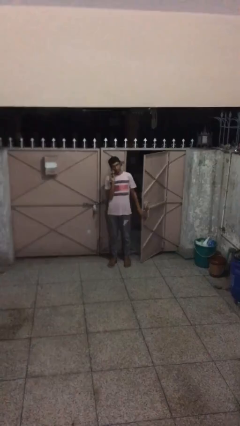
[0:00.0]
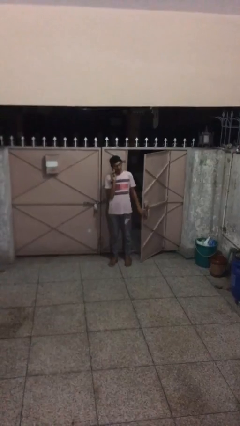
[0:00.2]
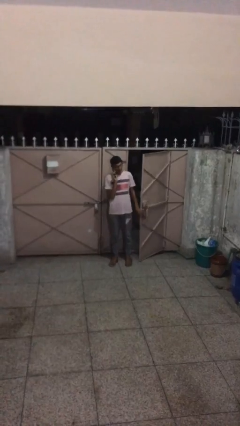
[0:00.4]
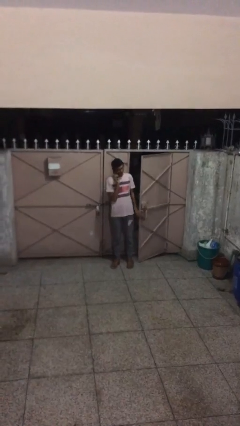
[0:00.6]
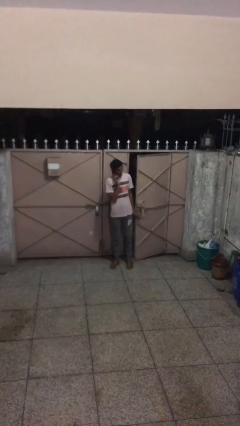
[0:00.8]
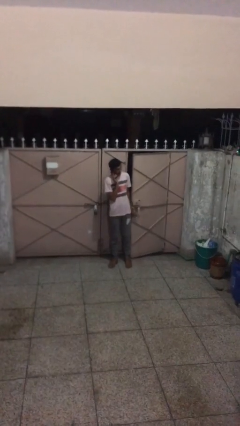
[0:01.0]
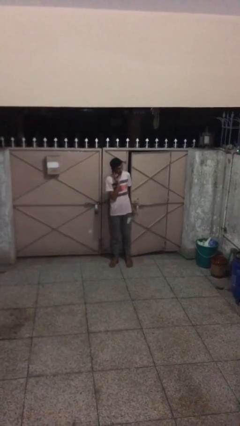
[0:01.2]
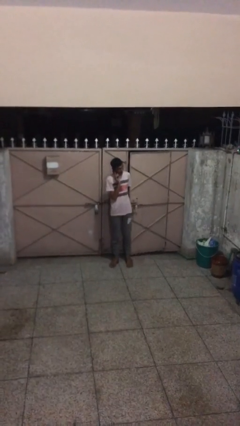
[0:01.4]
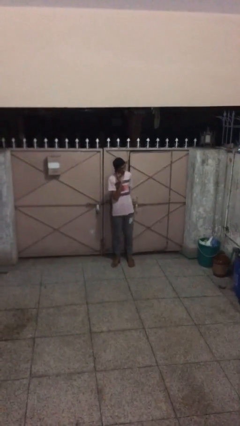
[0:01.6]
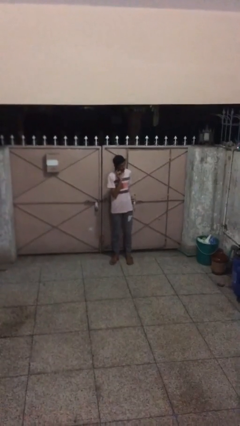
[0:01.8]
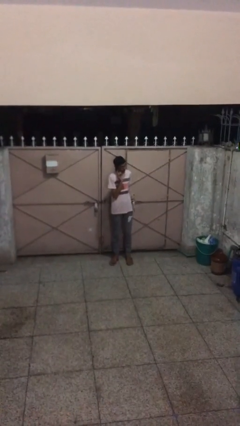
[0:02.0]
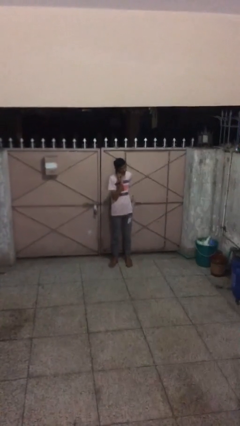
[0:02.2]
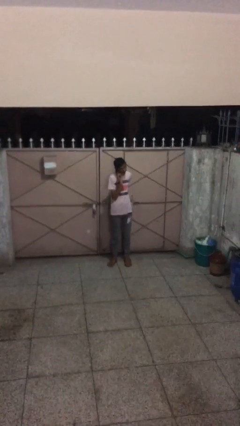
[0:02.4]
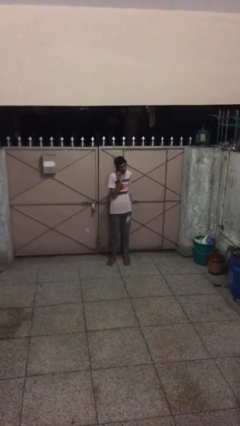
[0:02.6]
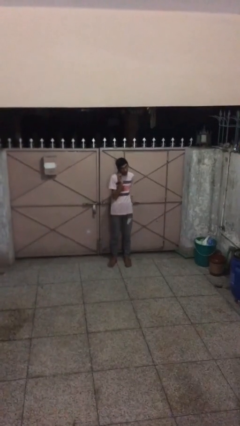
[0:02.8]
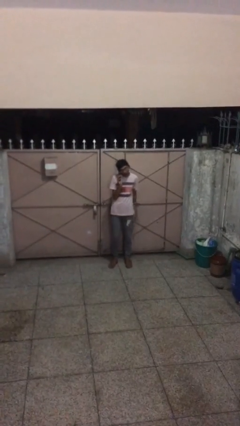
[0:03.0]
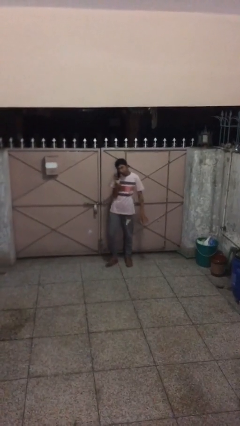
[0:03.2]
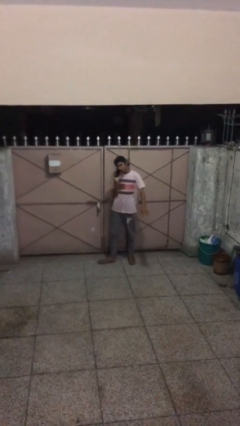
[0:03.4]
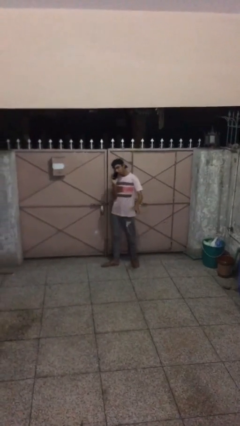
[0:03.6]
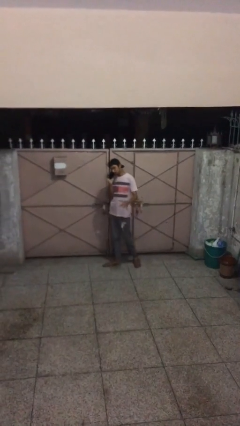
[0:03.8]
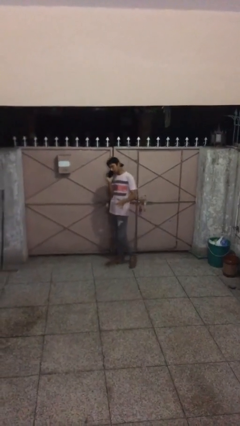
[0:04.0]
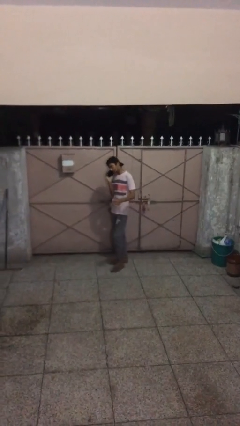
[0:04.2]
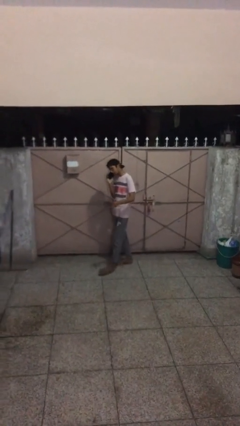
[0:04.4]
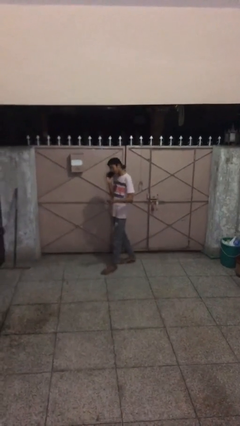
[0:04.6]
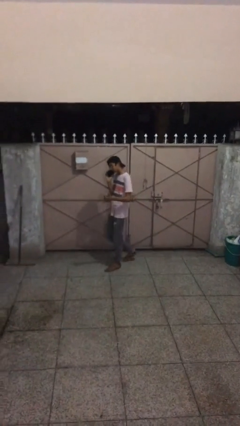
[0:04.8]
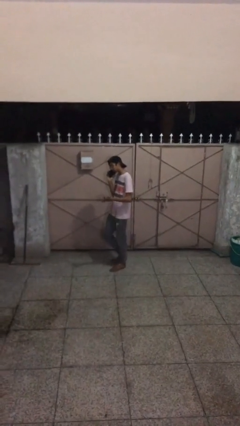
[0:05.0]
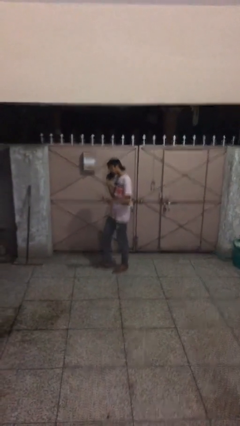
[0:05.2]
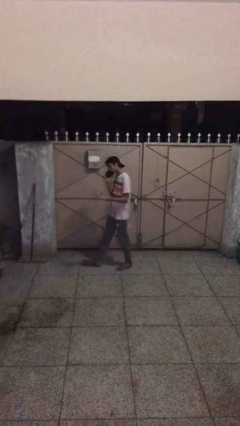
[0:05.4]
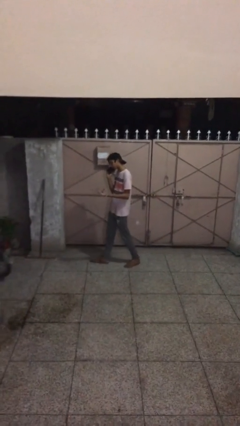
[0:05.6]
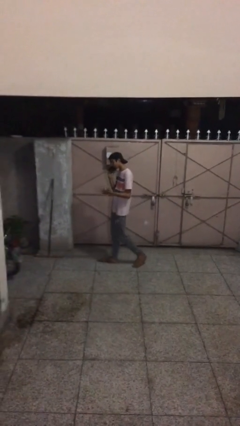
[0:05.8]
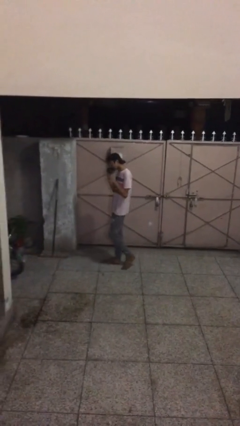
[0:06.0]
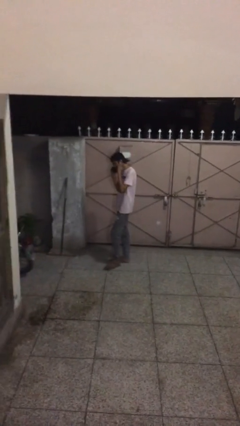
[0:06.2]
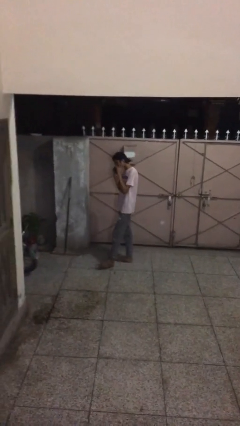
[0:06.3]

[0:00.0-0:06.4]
person closes facility door

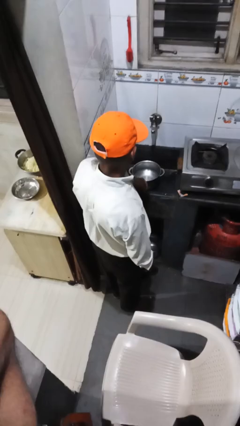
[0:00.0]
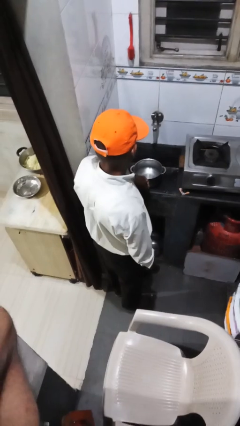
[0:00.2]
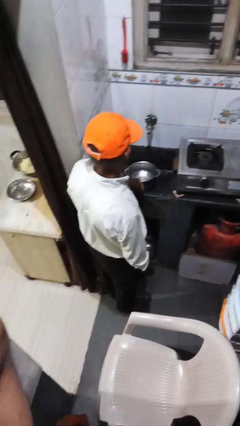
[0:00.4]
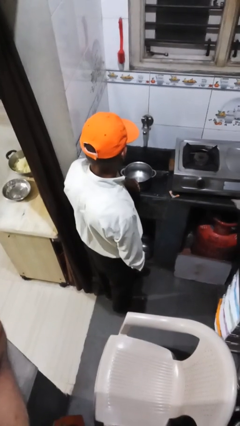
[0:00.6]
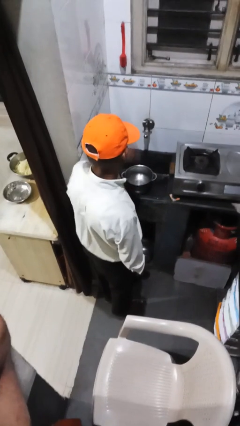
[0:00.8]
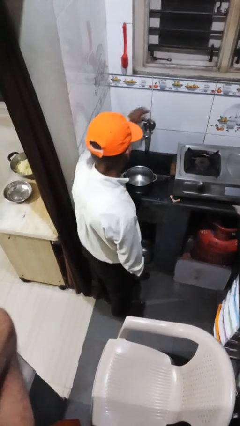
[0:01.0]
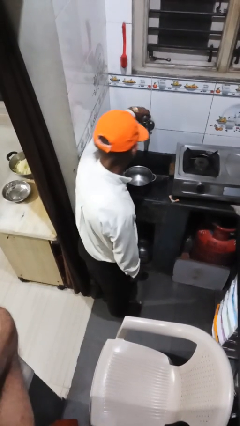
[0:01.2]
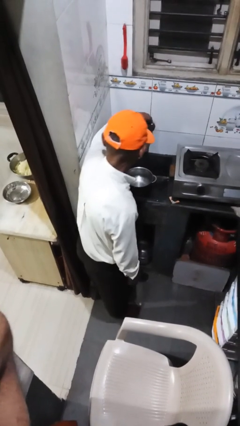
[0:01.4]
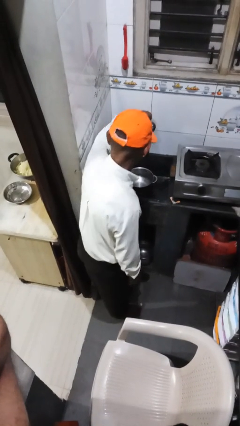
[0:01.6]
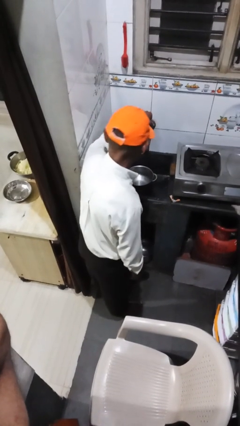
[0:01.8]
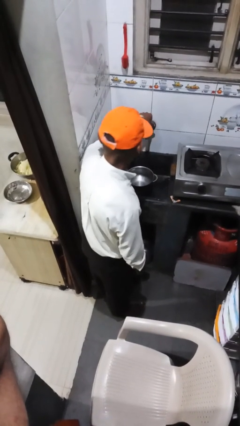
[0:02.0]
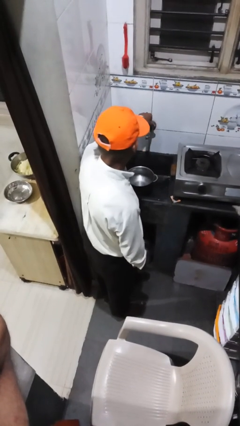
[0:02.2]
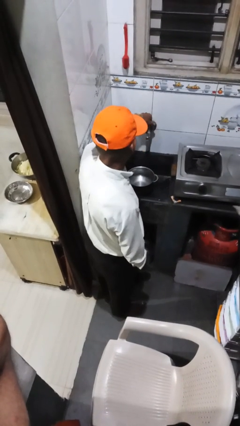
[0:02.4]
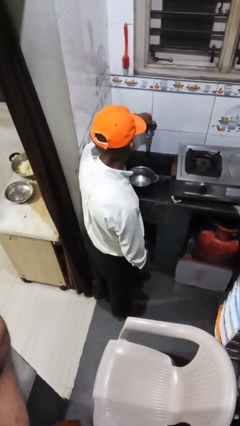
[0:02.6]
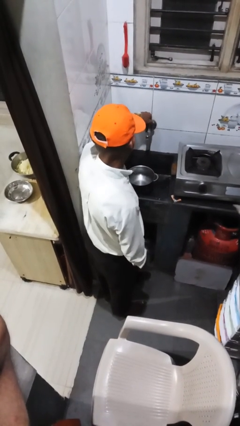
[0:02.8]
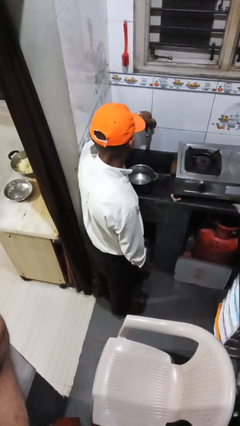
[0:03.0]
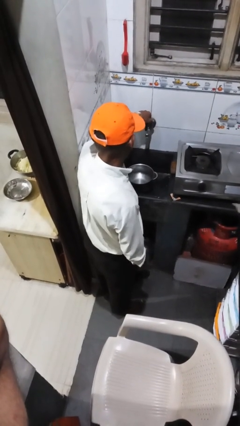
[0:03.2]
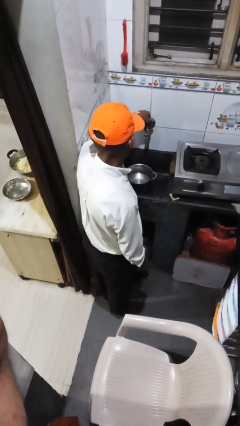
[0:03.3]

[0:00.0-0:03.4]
person turns on faucet

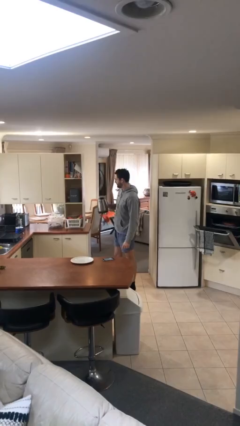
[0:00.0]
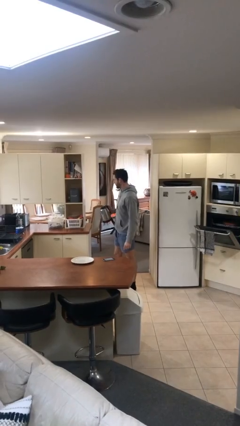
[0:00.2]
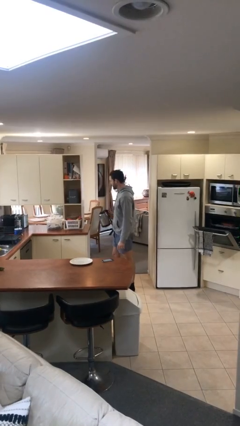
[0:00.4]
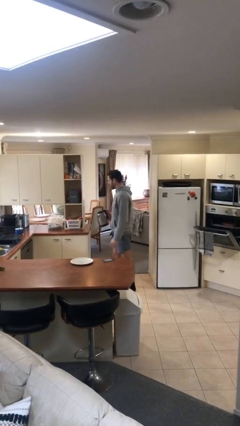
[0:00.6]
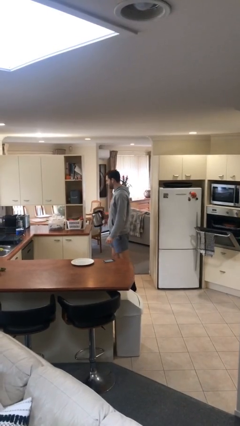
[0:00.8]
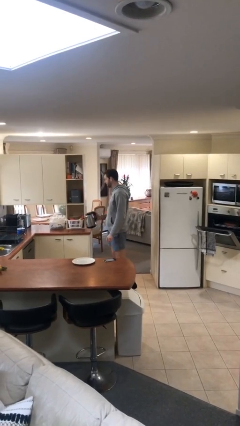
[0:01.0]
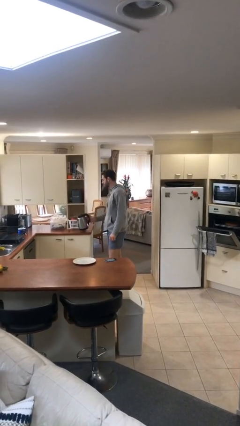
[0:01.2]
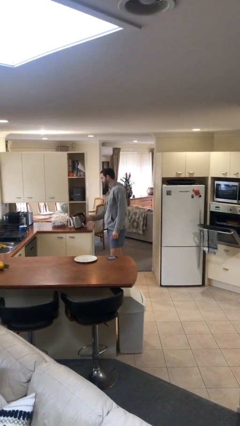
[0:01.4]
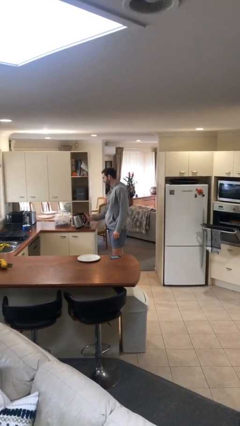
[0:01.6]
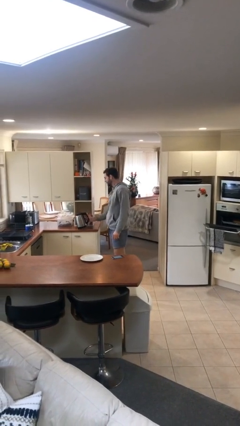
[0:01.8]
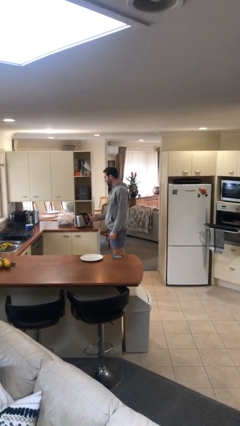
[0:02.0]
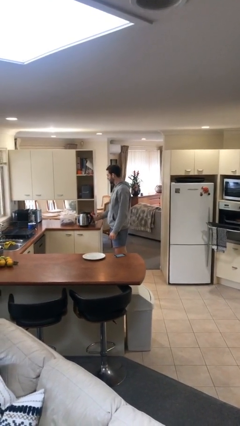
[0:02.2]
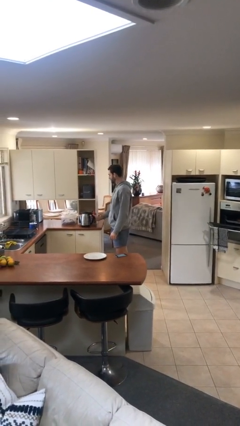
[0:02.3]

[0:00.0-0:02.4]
person puts down object on table

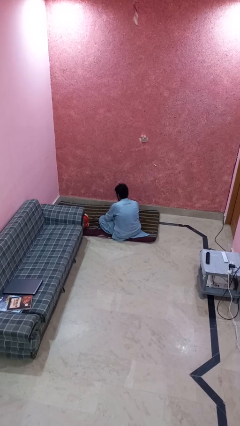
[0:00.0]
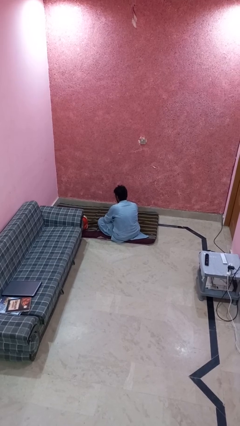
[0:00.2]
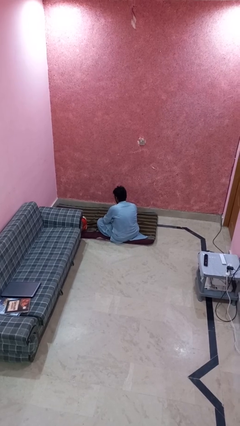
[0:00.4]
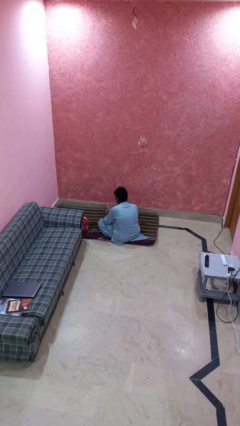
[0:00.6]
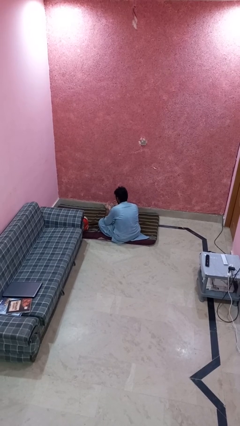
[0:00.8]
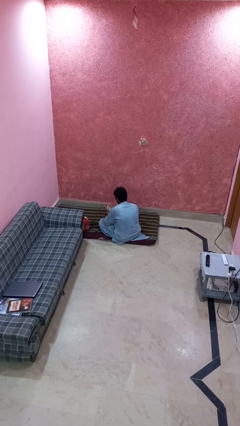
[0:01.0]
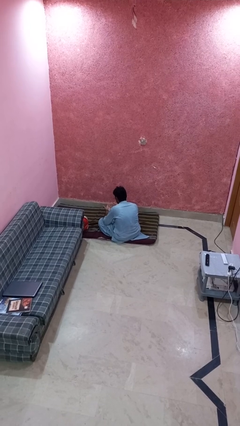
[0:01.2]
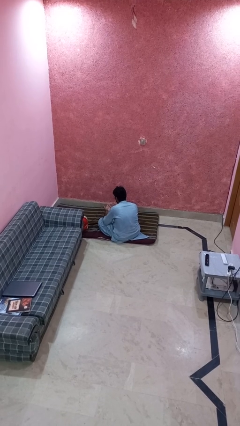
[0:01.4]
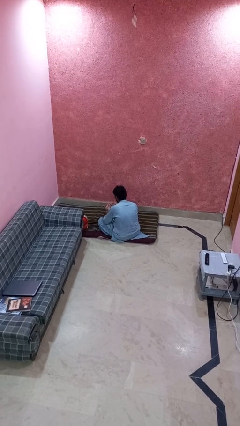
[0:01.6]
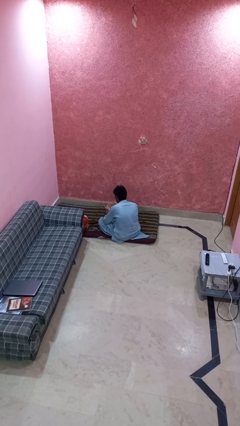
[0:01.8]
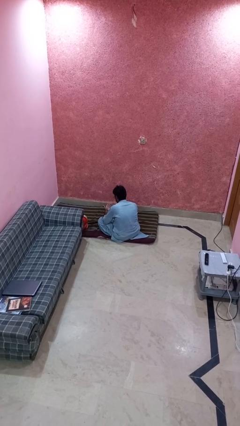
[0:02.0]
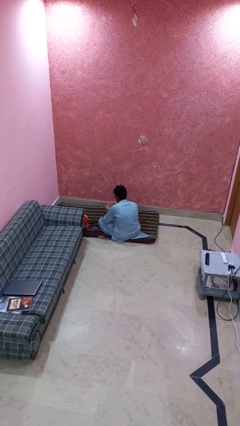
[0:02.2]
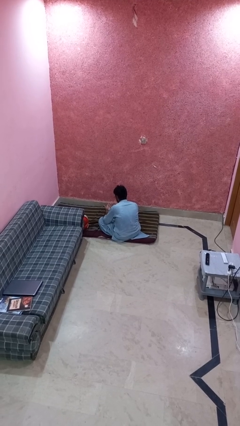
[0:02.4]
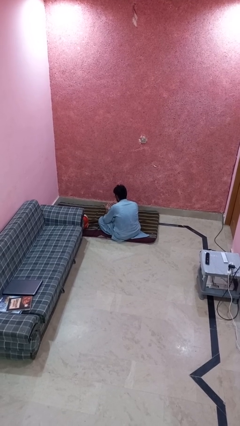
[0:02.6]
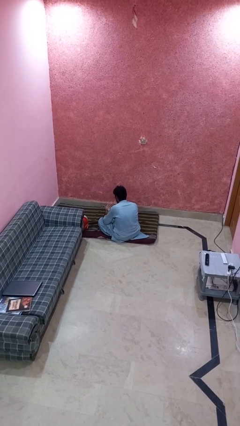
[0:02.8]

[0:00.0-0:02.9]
person looks at hands in lap

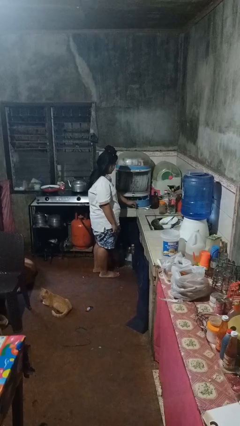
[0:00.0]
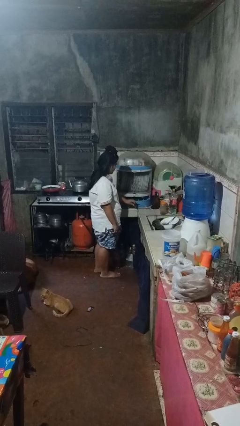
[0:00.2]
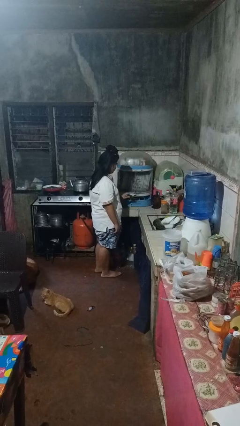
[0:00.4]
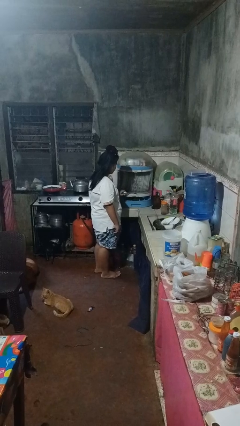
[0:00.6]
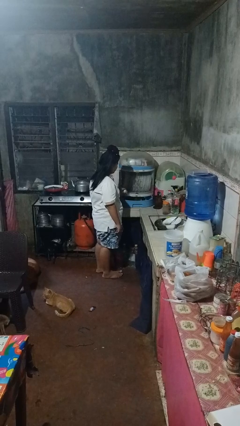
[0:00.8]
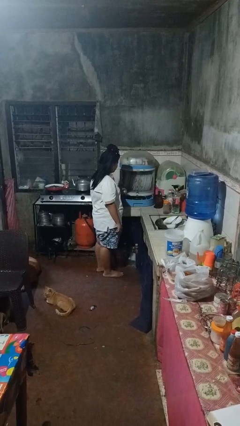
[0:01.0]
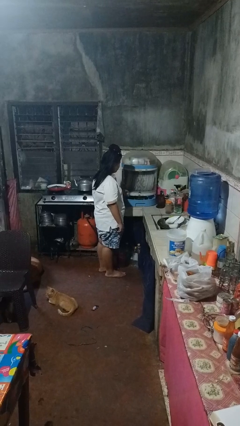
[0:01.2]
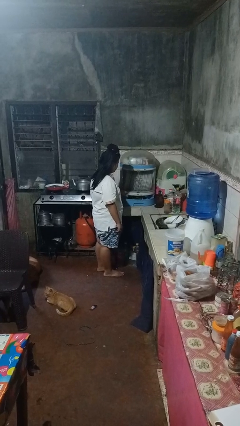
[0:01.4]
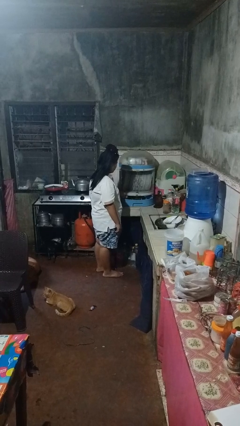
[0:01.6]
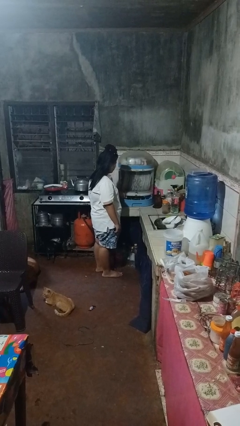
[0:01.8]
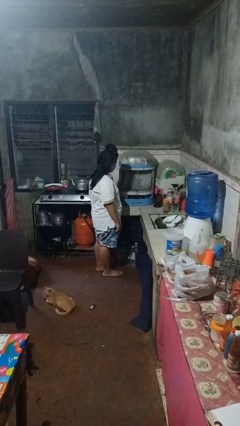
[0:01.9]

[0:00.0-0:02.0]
person puts object into kitchen drawer

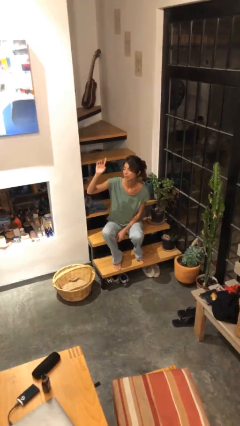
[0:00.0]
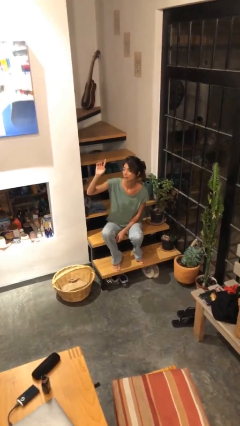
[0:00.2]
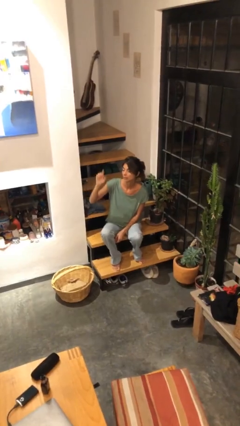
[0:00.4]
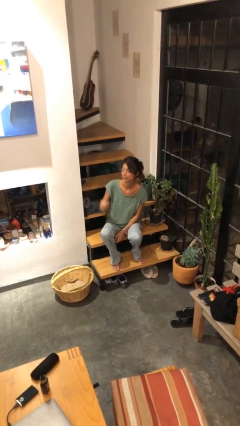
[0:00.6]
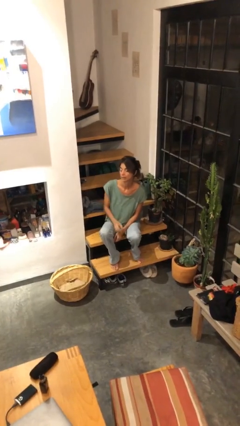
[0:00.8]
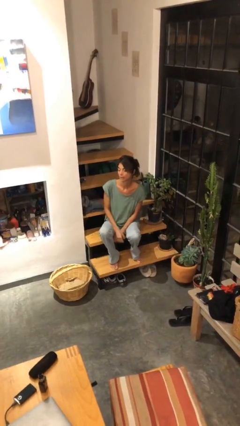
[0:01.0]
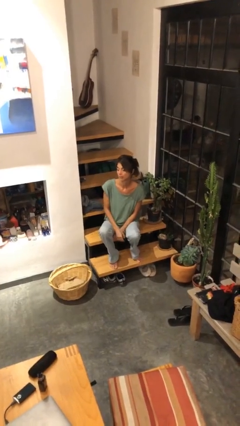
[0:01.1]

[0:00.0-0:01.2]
person gestures lower hand
